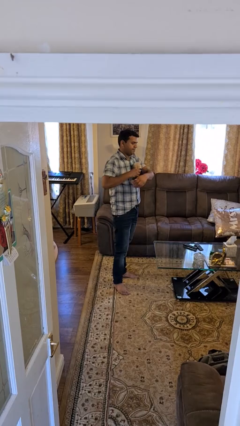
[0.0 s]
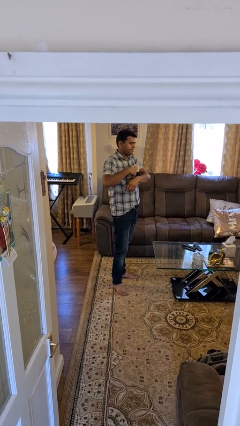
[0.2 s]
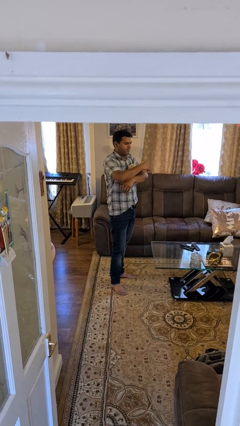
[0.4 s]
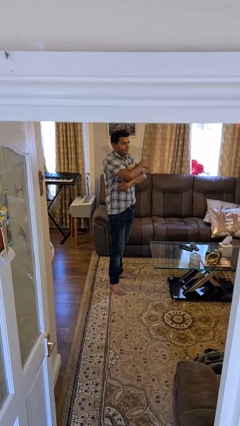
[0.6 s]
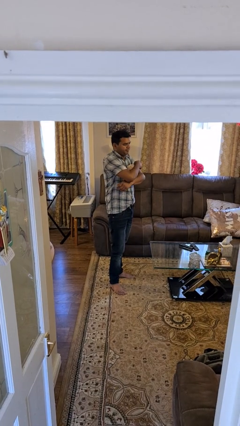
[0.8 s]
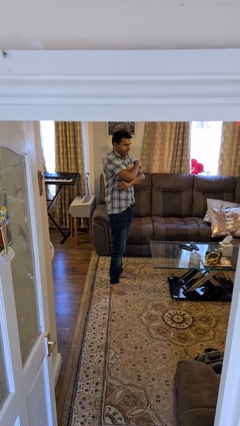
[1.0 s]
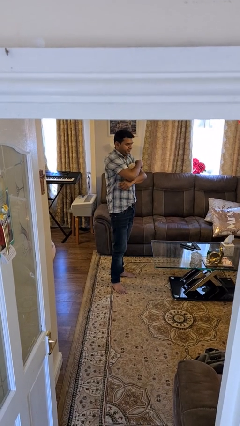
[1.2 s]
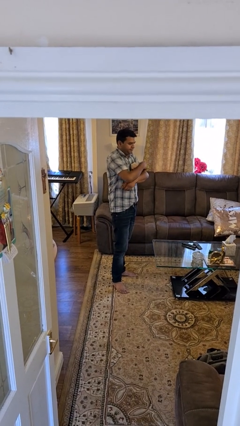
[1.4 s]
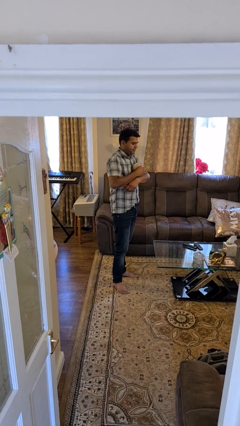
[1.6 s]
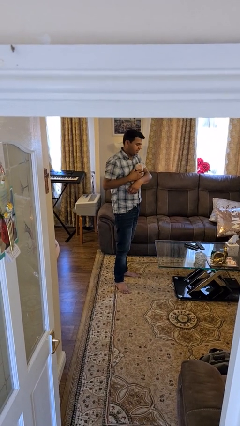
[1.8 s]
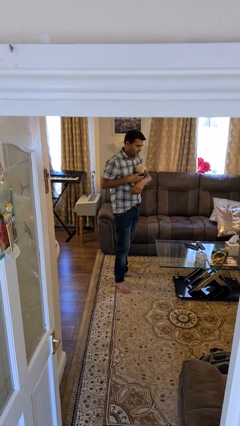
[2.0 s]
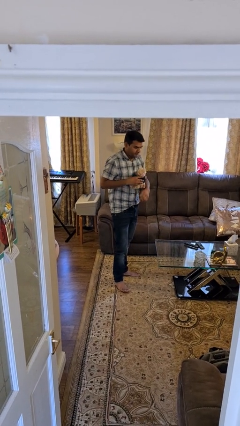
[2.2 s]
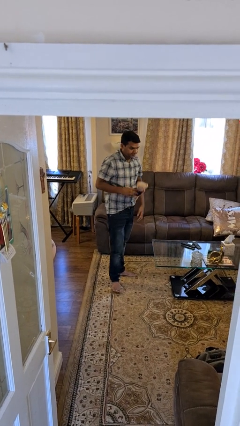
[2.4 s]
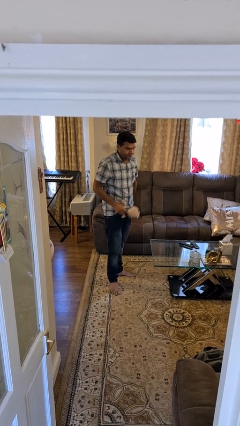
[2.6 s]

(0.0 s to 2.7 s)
person hugs stuffed animal

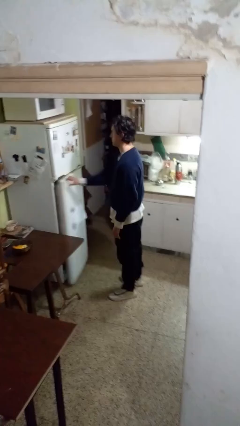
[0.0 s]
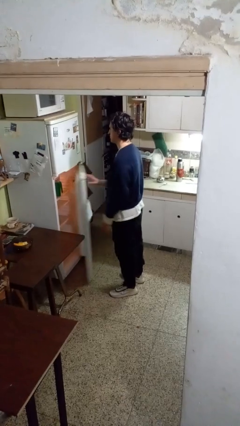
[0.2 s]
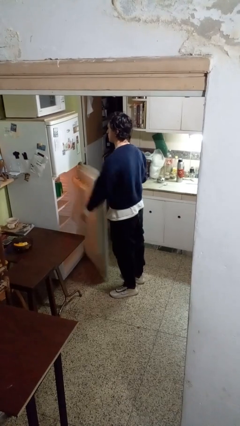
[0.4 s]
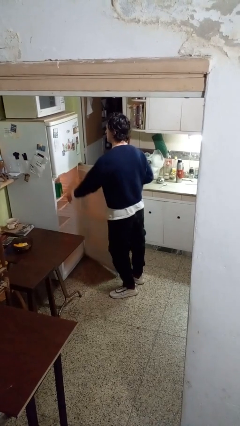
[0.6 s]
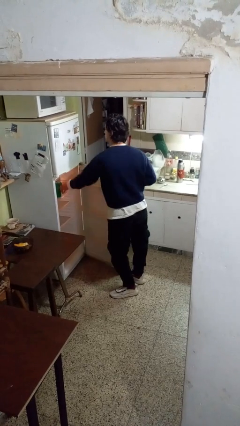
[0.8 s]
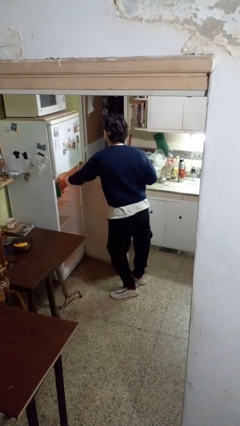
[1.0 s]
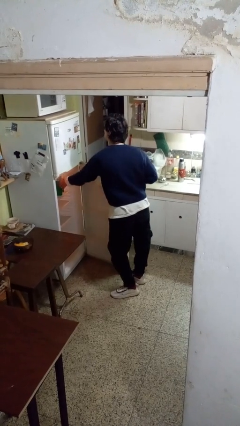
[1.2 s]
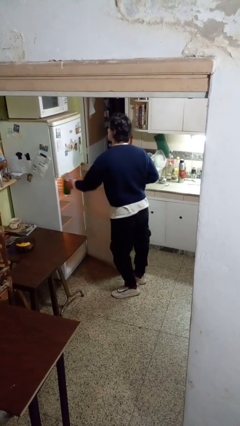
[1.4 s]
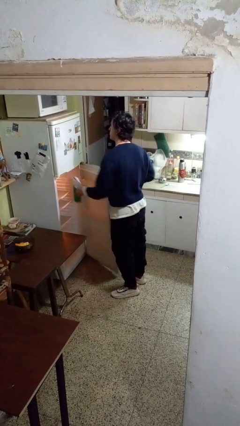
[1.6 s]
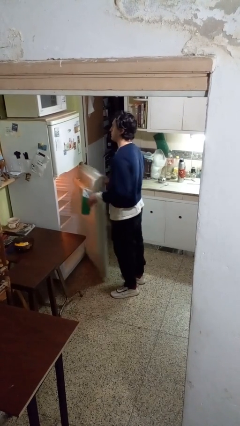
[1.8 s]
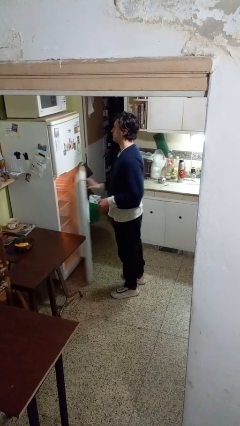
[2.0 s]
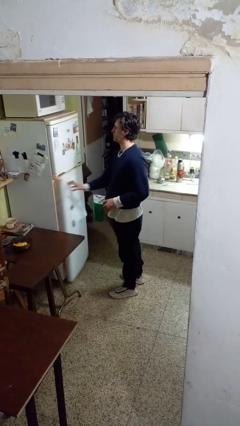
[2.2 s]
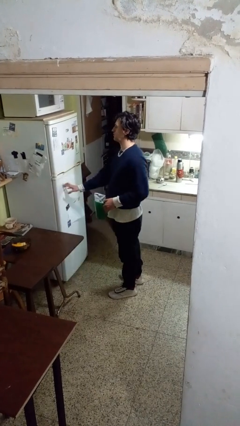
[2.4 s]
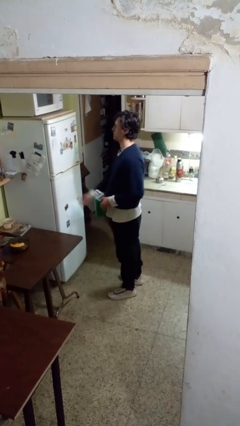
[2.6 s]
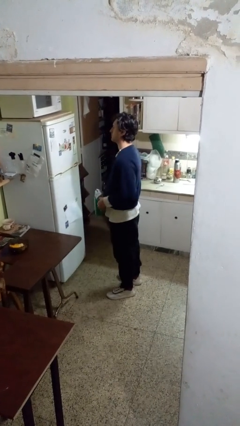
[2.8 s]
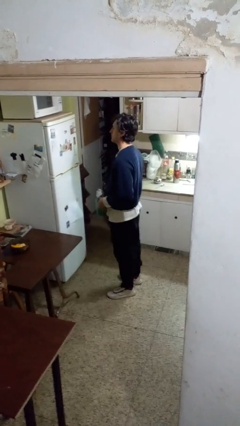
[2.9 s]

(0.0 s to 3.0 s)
person takes object from refrigerator

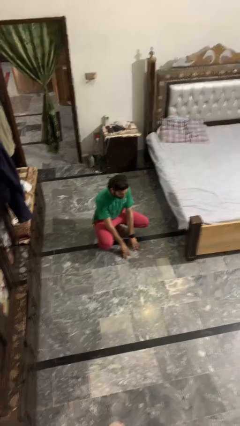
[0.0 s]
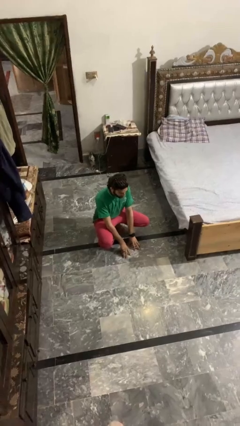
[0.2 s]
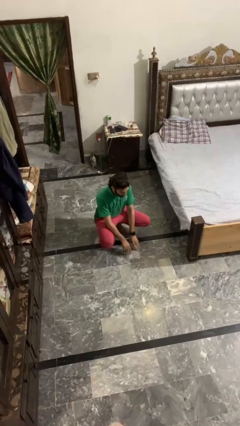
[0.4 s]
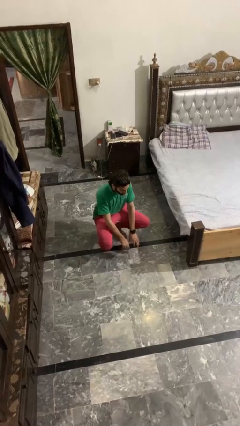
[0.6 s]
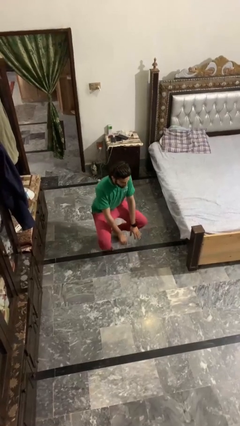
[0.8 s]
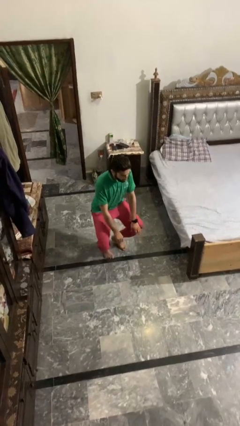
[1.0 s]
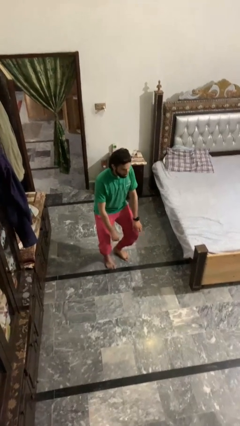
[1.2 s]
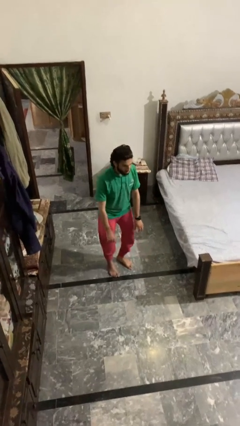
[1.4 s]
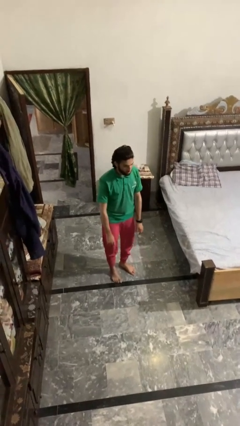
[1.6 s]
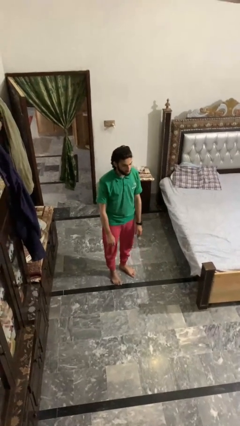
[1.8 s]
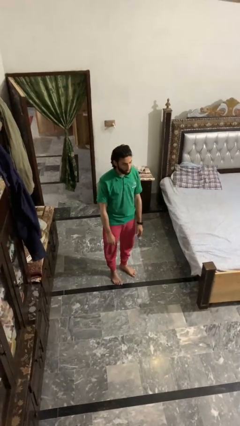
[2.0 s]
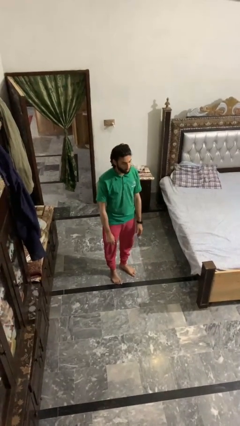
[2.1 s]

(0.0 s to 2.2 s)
person stands up

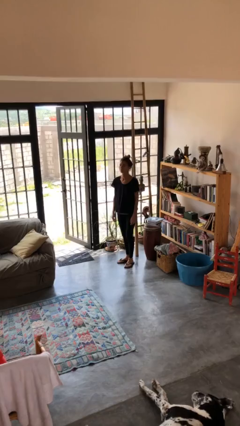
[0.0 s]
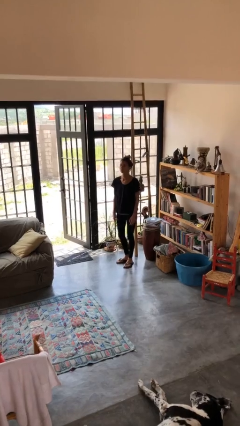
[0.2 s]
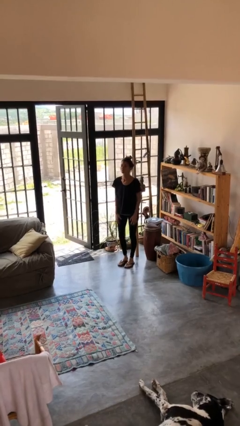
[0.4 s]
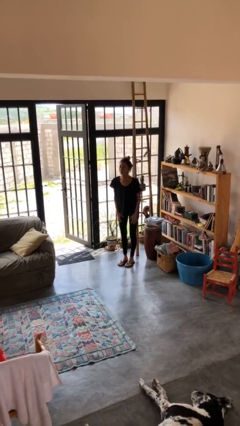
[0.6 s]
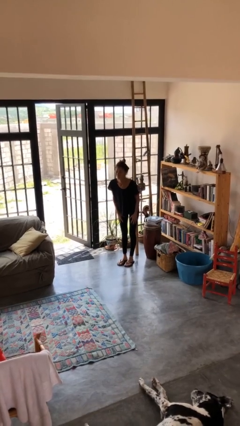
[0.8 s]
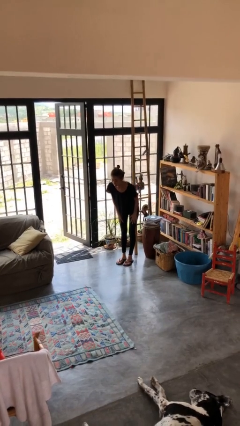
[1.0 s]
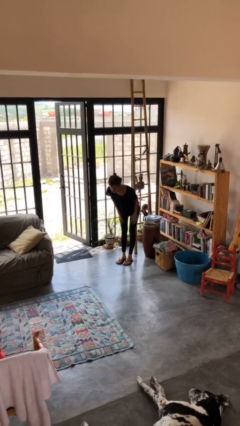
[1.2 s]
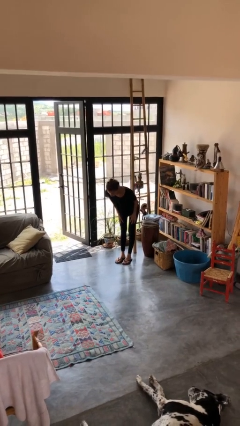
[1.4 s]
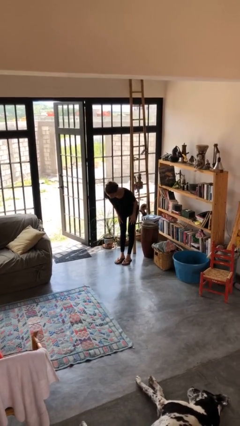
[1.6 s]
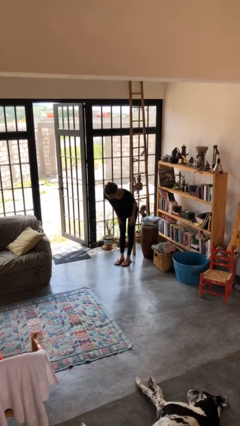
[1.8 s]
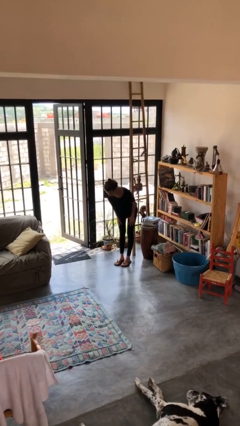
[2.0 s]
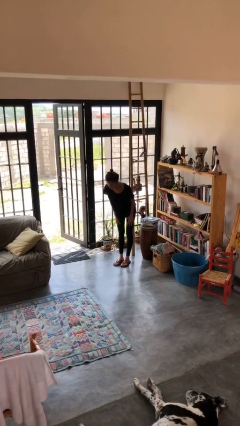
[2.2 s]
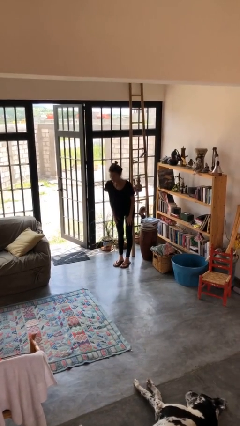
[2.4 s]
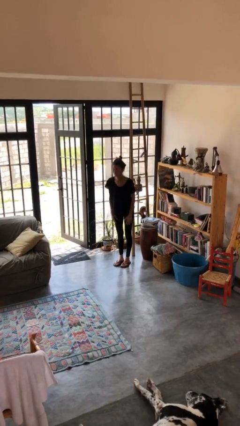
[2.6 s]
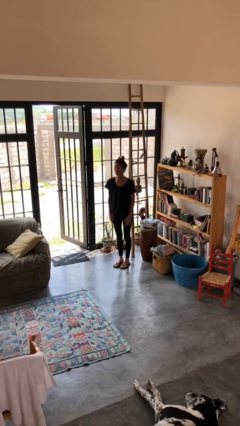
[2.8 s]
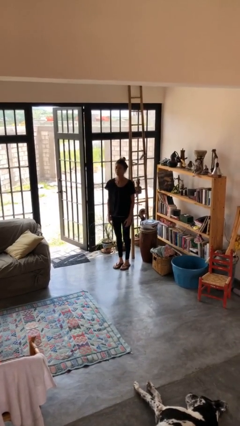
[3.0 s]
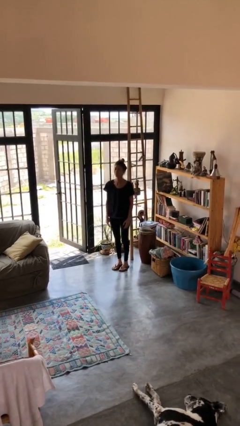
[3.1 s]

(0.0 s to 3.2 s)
person bows

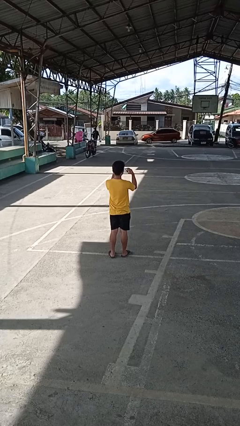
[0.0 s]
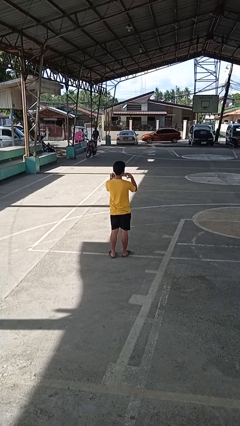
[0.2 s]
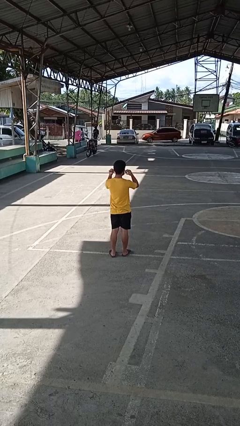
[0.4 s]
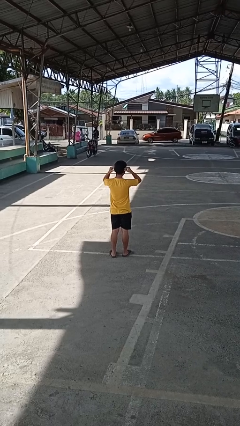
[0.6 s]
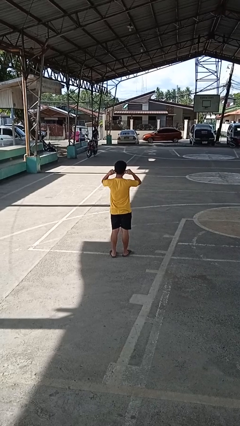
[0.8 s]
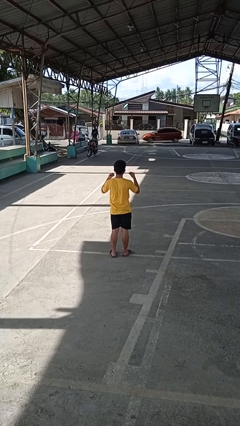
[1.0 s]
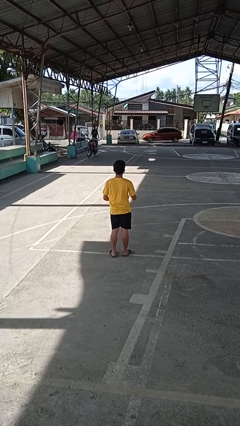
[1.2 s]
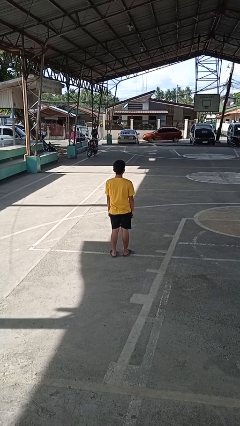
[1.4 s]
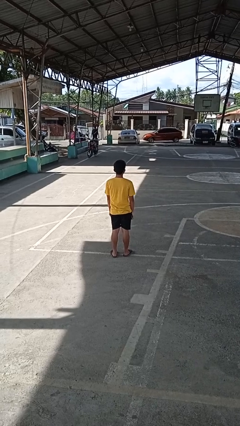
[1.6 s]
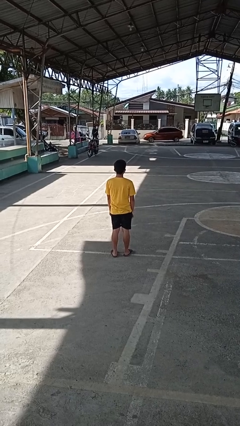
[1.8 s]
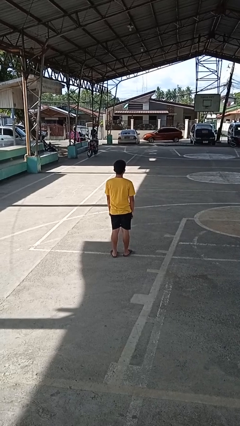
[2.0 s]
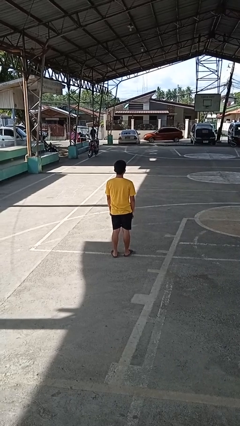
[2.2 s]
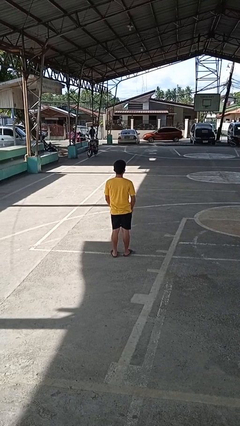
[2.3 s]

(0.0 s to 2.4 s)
person puts on facemask

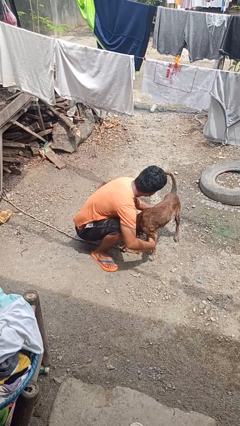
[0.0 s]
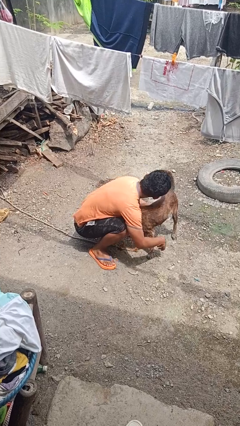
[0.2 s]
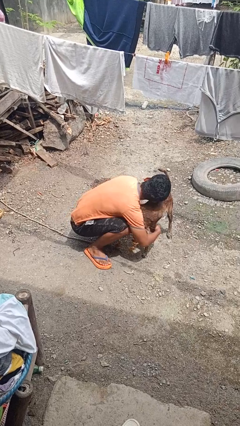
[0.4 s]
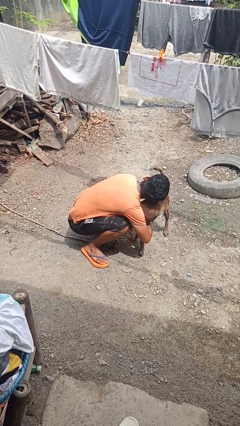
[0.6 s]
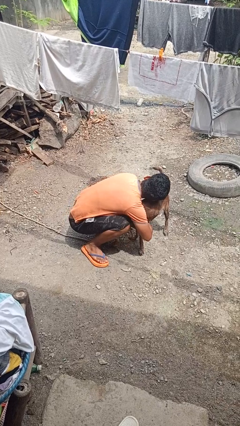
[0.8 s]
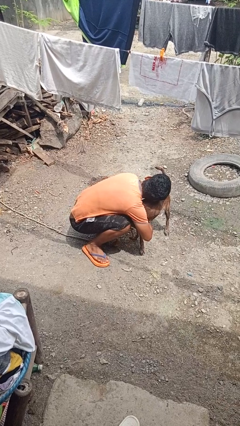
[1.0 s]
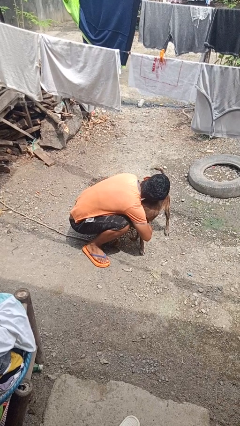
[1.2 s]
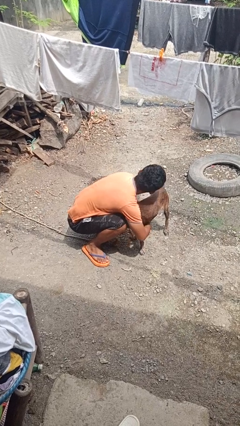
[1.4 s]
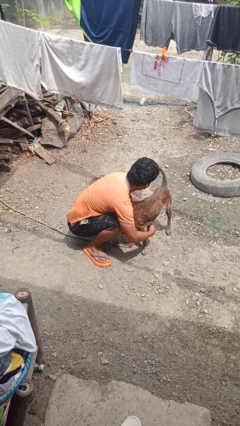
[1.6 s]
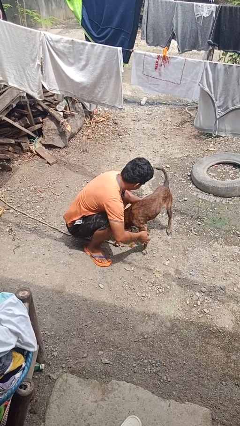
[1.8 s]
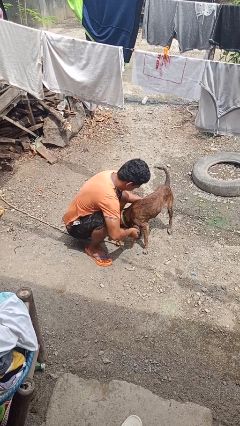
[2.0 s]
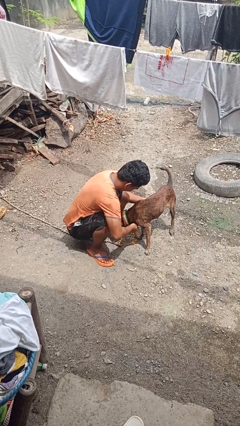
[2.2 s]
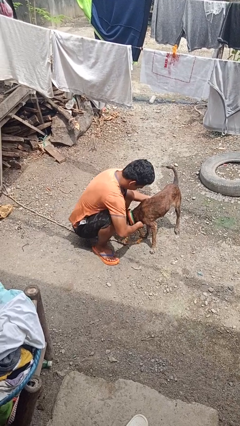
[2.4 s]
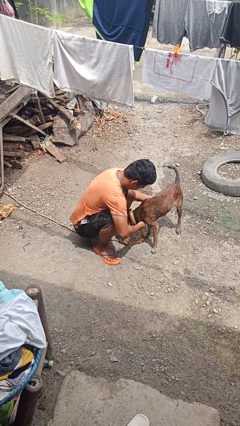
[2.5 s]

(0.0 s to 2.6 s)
person hugs dog

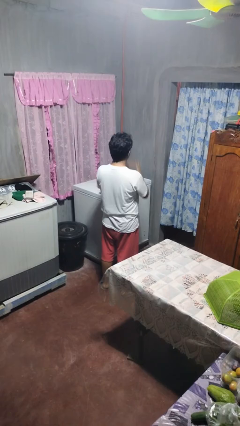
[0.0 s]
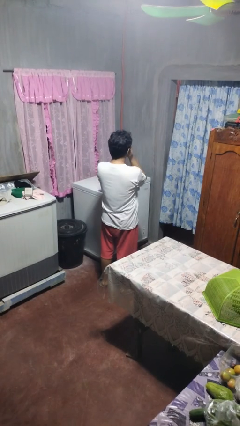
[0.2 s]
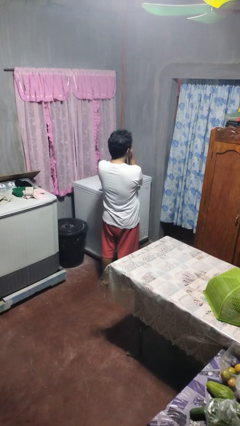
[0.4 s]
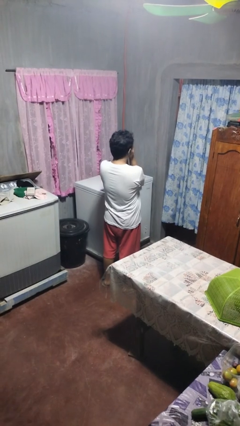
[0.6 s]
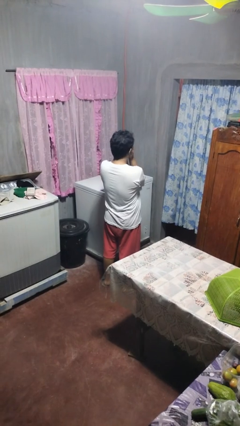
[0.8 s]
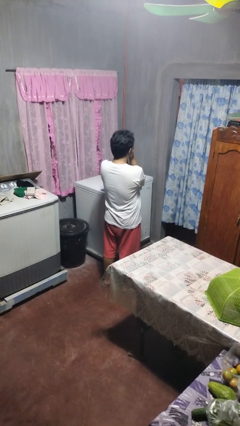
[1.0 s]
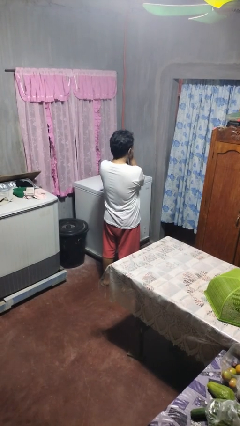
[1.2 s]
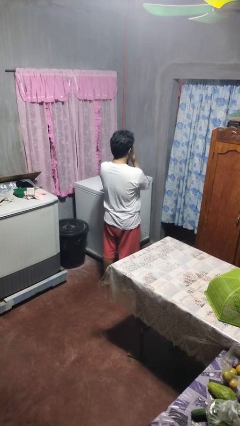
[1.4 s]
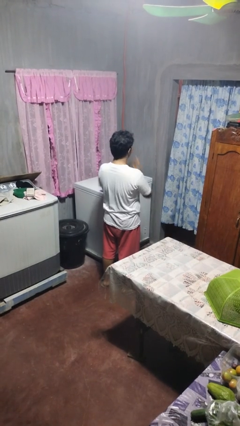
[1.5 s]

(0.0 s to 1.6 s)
person covers face with hands
